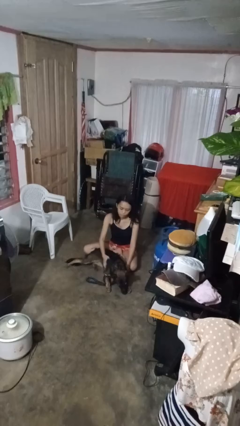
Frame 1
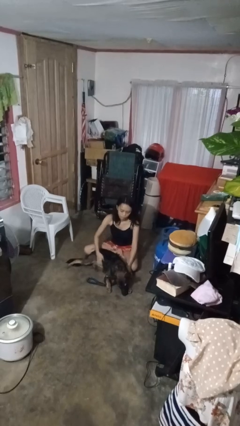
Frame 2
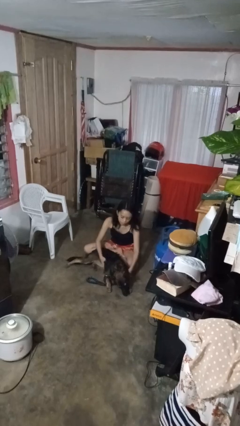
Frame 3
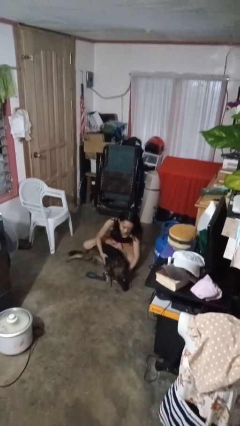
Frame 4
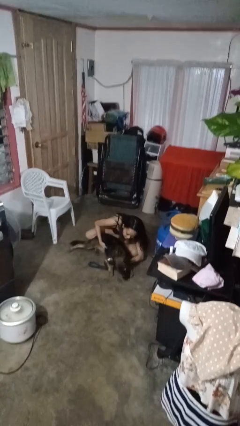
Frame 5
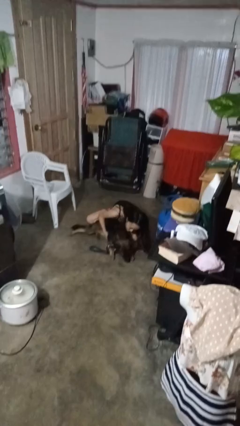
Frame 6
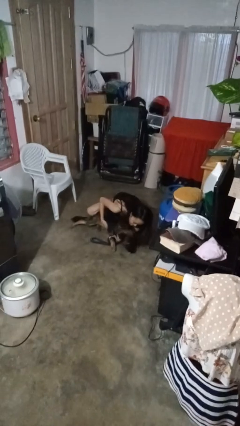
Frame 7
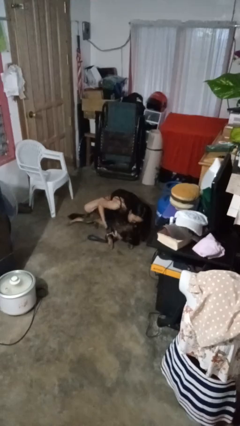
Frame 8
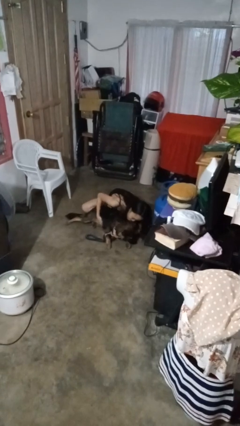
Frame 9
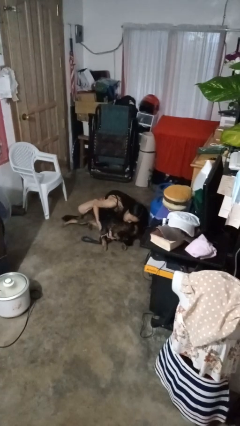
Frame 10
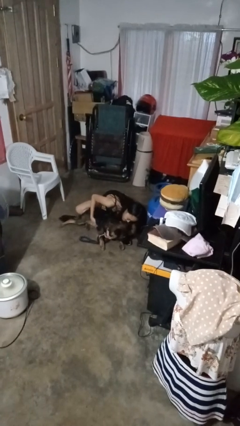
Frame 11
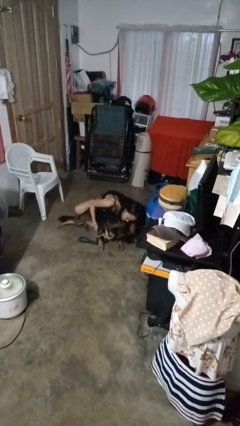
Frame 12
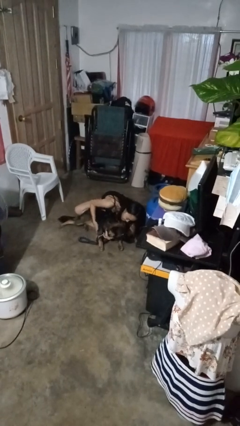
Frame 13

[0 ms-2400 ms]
person hugs dog

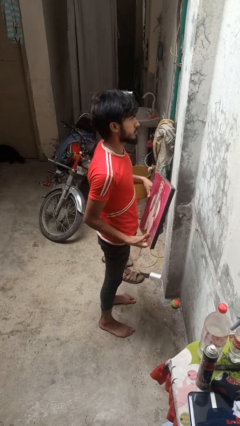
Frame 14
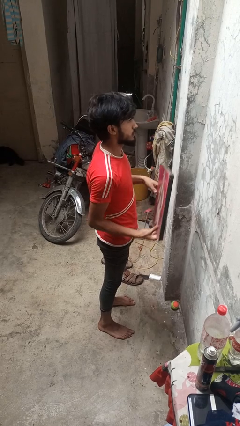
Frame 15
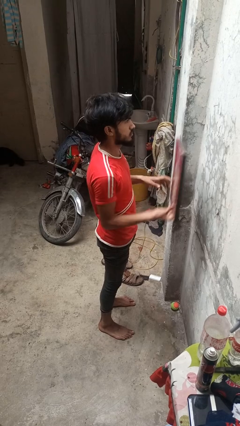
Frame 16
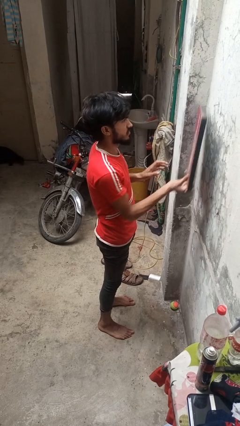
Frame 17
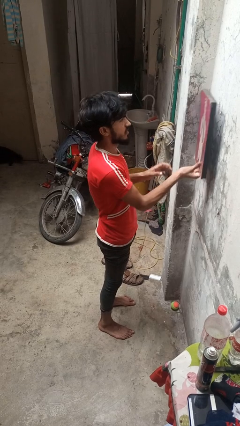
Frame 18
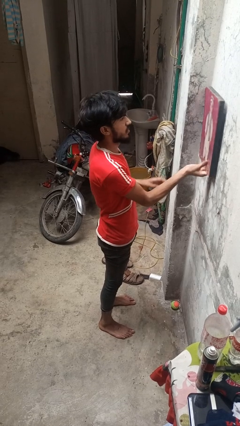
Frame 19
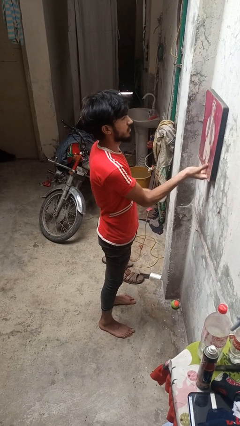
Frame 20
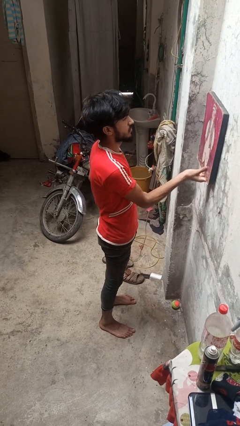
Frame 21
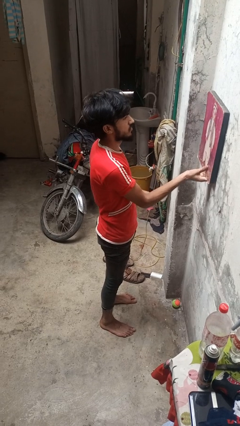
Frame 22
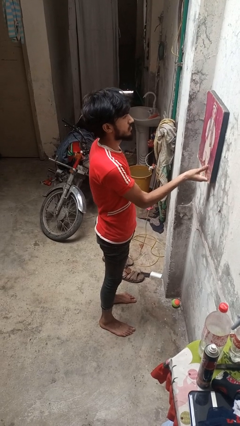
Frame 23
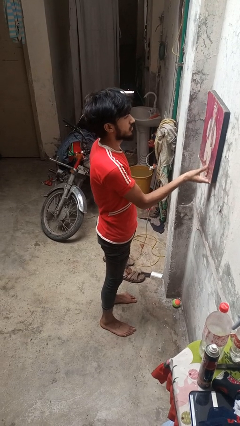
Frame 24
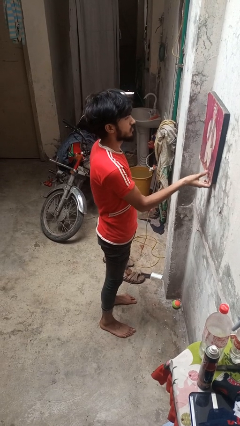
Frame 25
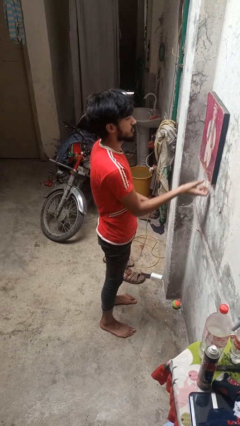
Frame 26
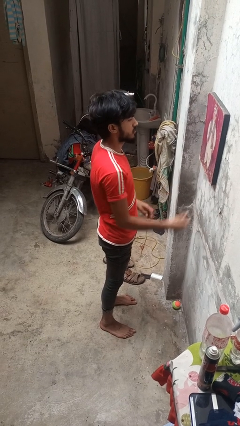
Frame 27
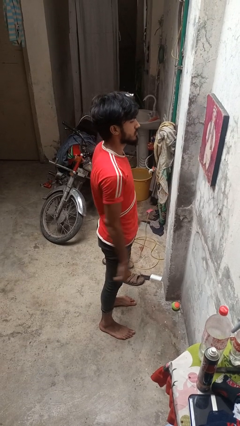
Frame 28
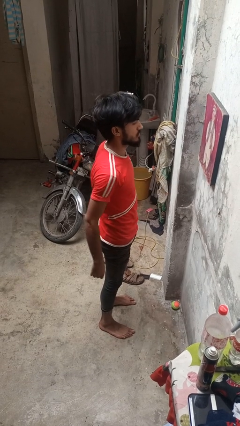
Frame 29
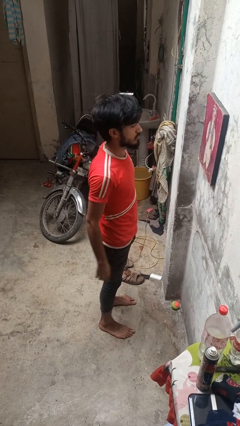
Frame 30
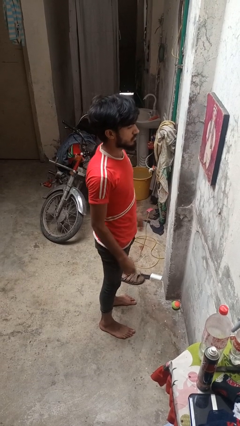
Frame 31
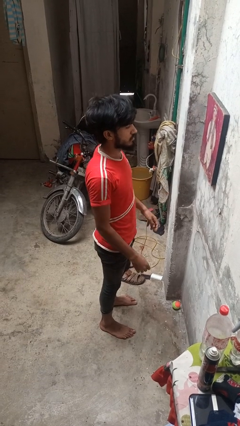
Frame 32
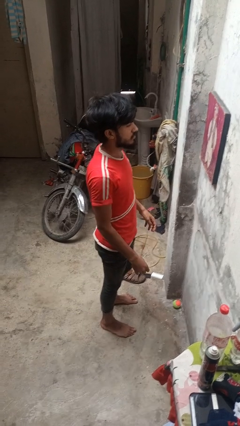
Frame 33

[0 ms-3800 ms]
person puts up picture frame

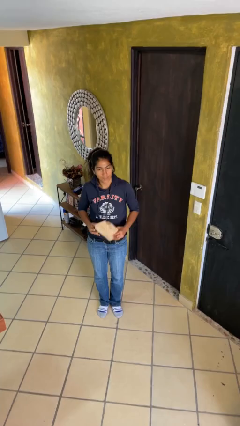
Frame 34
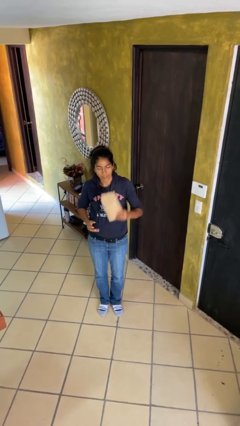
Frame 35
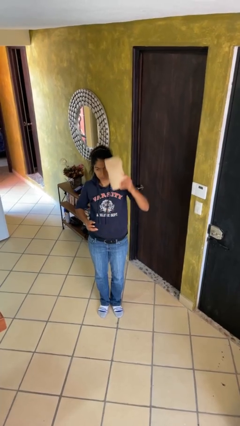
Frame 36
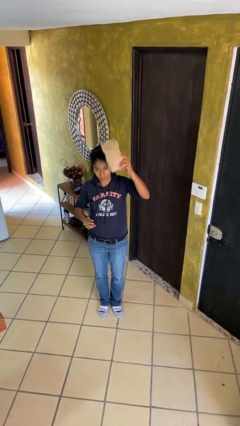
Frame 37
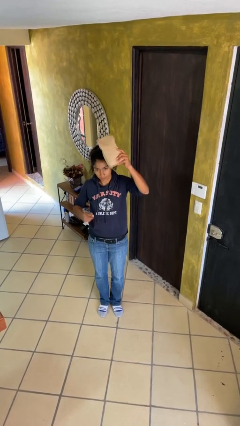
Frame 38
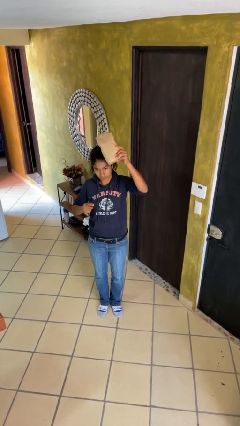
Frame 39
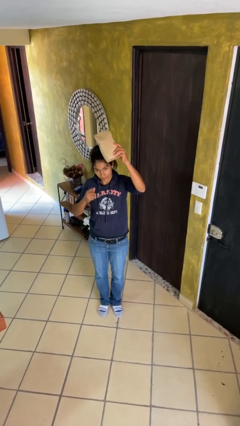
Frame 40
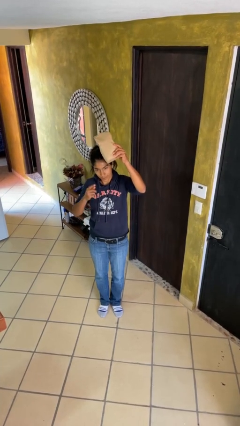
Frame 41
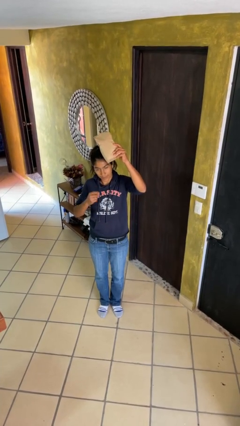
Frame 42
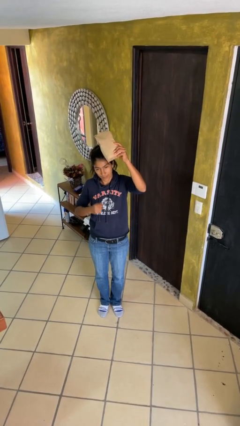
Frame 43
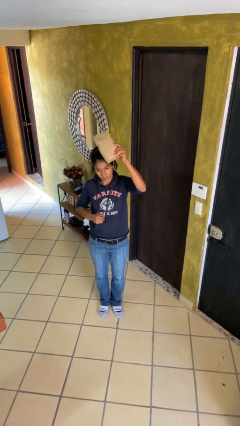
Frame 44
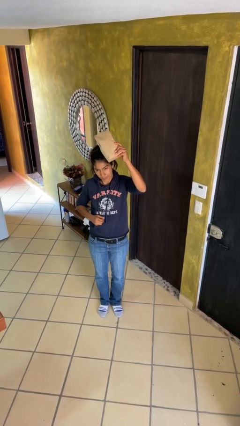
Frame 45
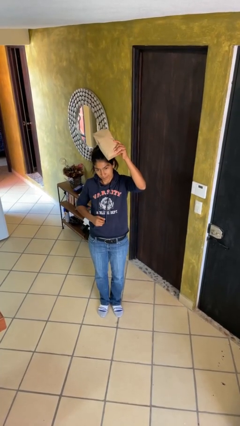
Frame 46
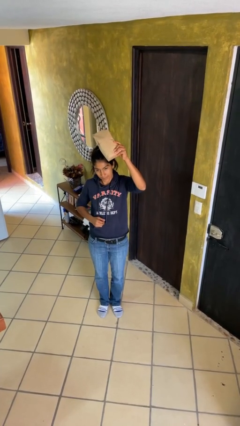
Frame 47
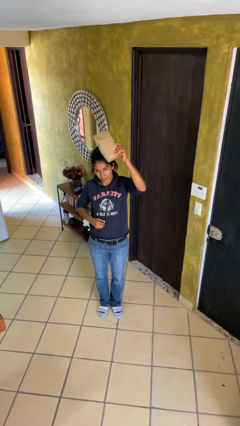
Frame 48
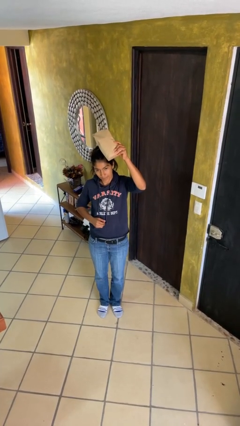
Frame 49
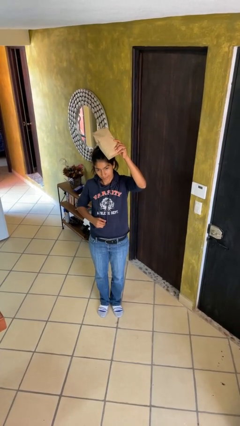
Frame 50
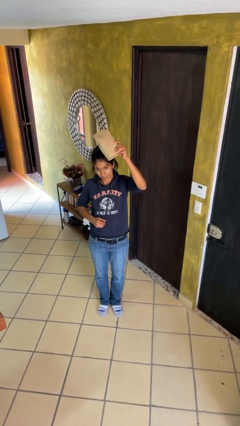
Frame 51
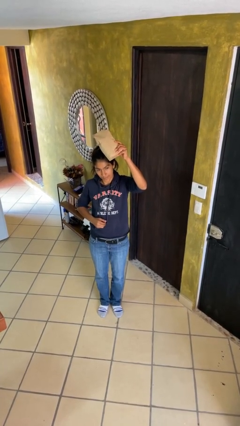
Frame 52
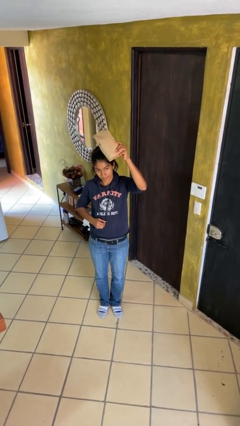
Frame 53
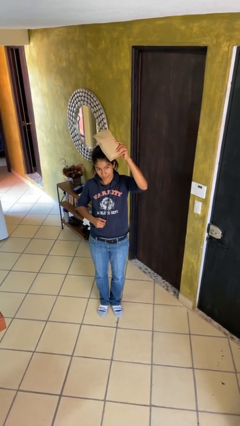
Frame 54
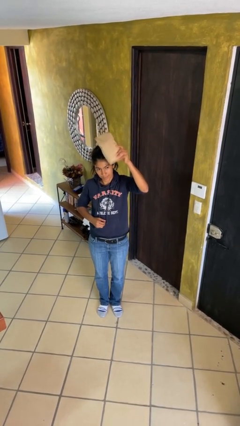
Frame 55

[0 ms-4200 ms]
person holds object above head

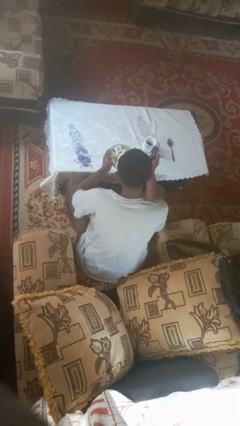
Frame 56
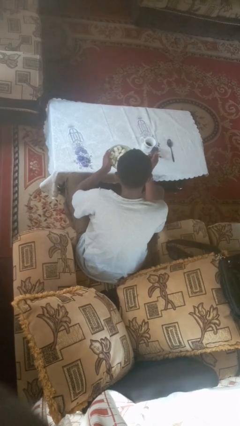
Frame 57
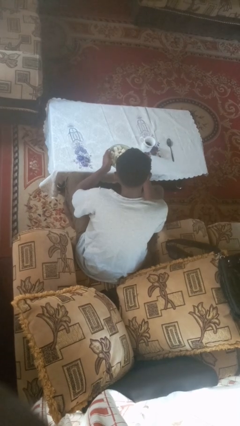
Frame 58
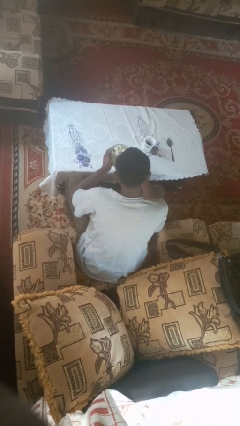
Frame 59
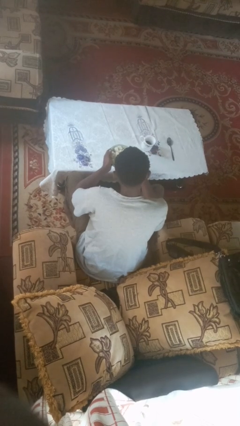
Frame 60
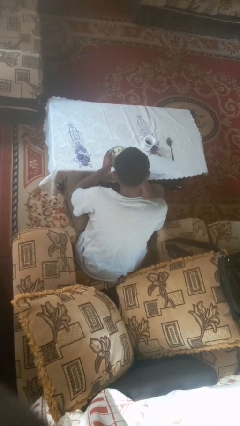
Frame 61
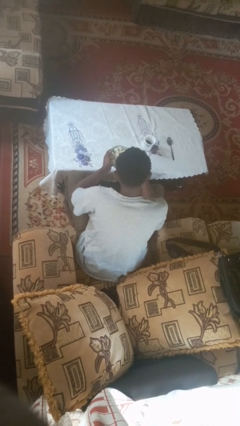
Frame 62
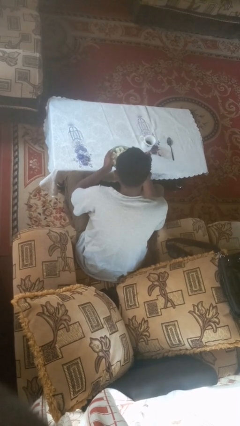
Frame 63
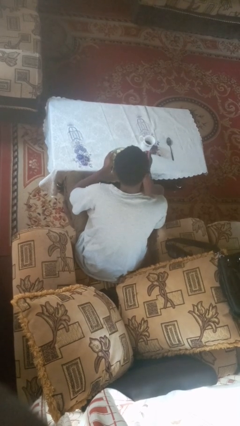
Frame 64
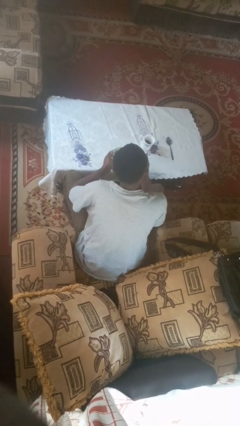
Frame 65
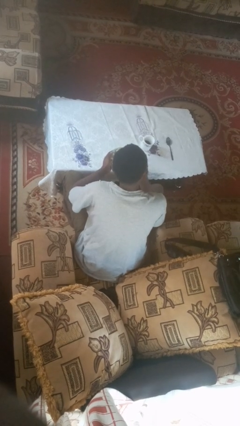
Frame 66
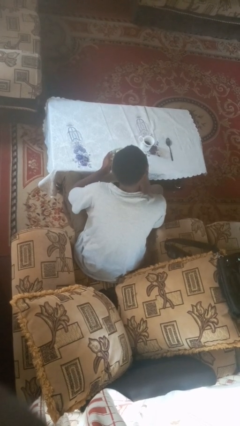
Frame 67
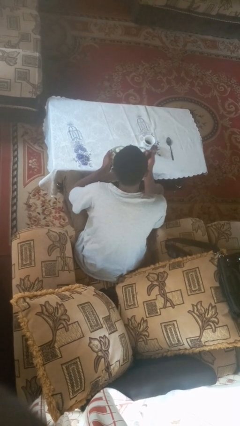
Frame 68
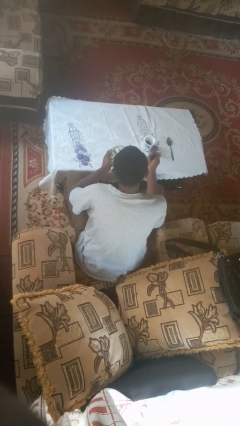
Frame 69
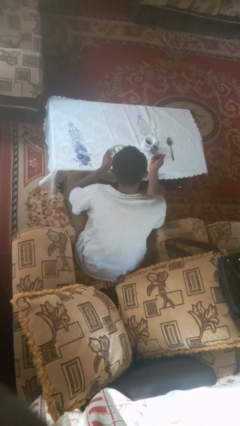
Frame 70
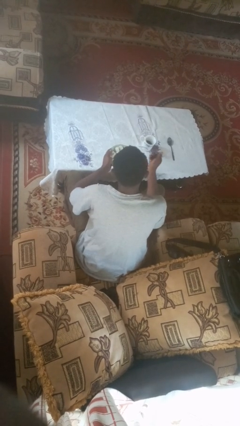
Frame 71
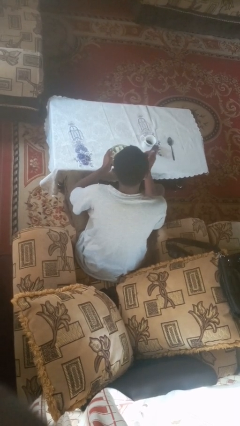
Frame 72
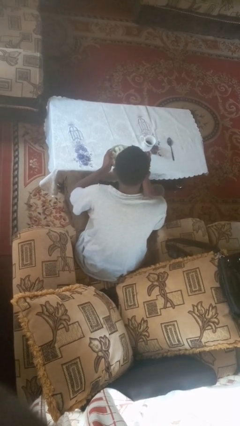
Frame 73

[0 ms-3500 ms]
person eats with utensil

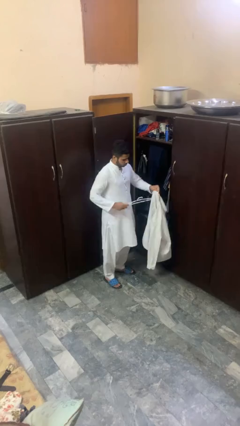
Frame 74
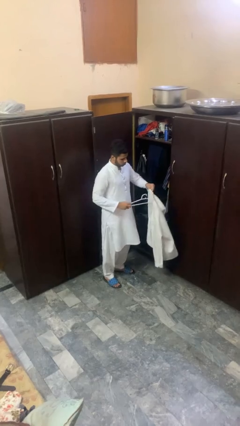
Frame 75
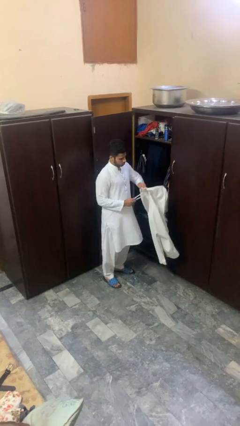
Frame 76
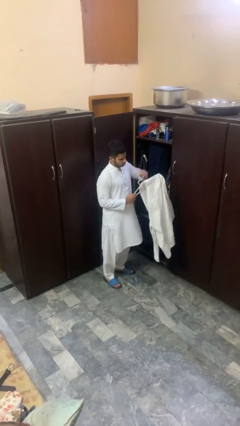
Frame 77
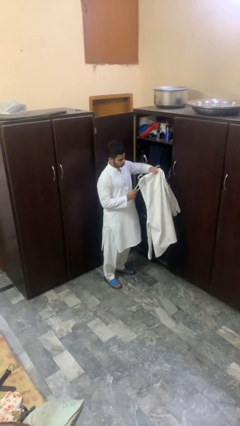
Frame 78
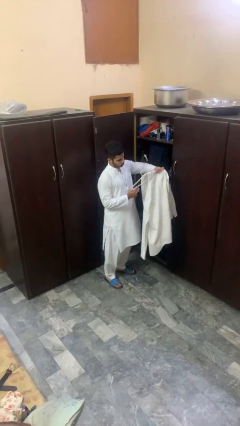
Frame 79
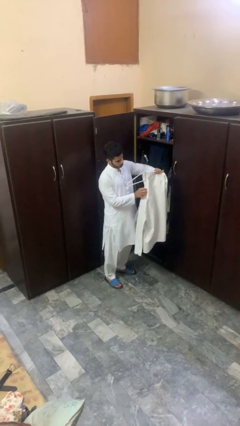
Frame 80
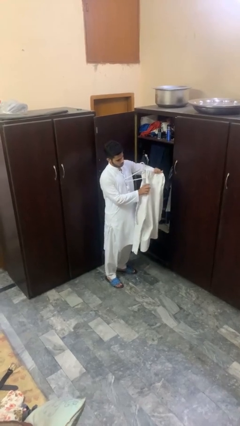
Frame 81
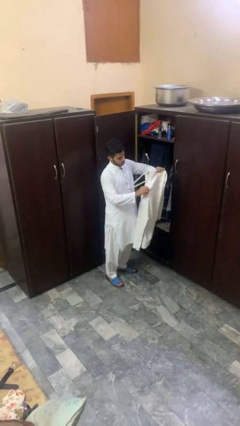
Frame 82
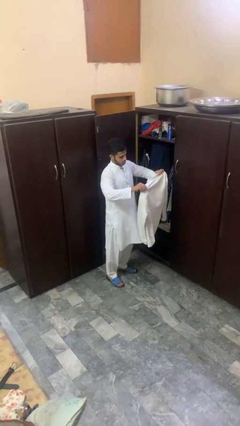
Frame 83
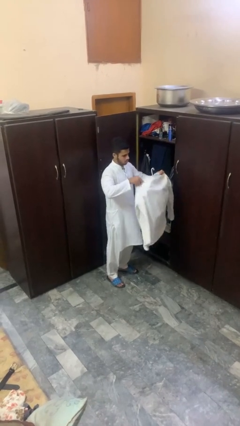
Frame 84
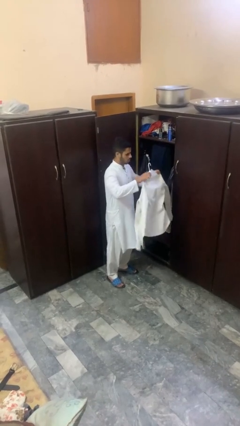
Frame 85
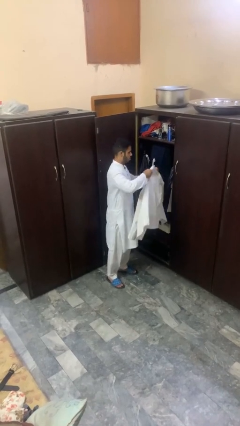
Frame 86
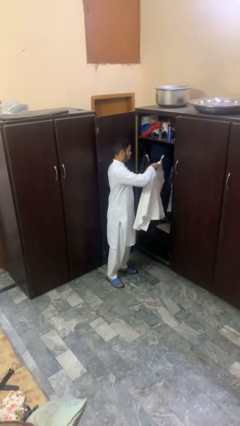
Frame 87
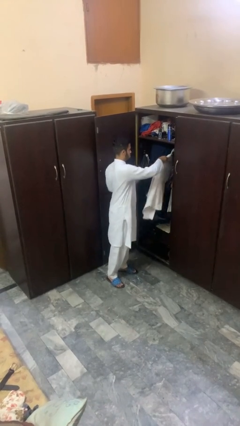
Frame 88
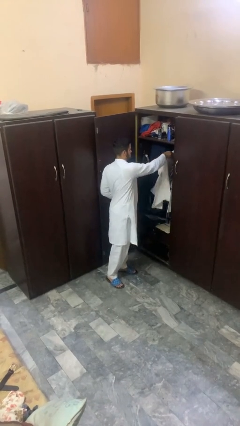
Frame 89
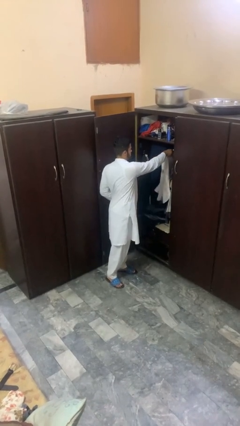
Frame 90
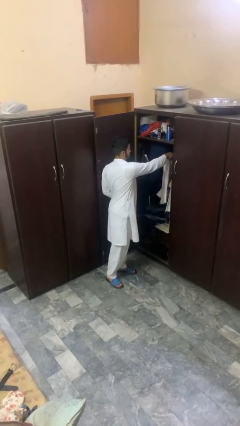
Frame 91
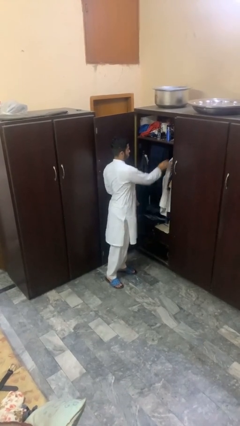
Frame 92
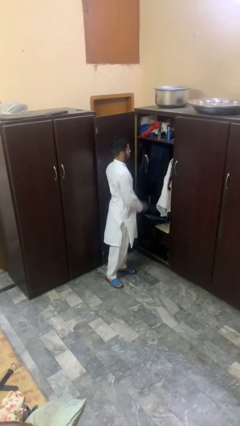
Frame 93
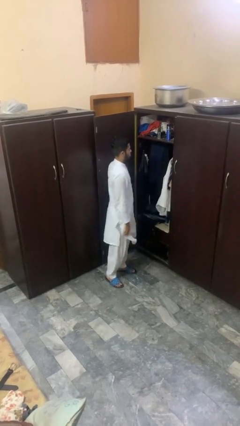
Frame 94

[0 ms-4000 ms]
person puts clothes into closet
